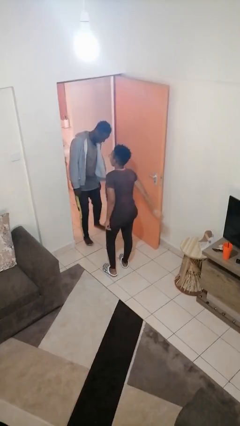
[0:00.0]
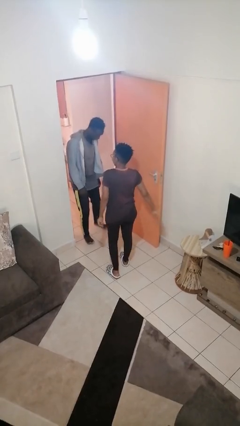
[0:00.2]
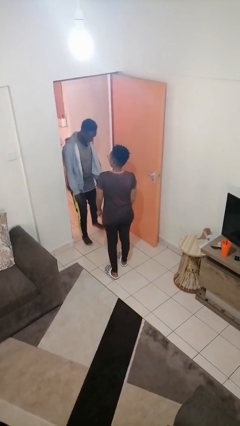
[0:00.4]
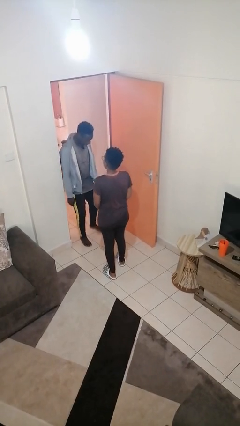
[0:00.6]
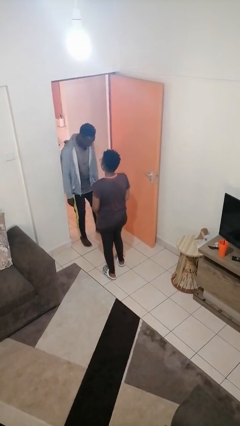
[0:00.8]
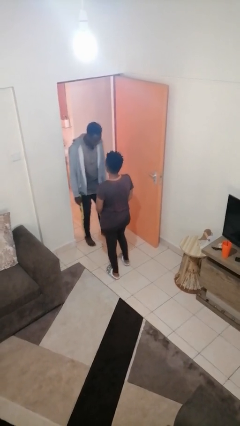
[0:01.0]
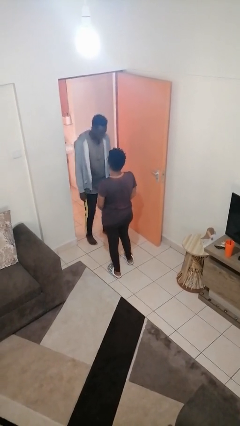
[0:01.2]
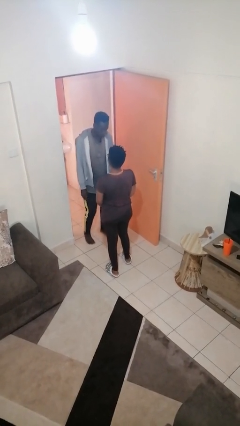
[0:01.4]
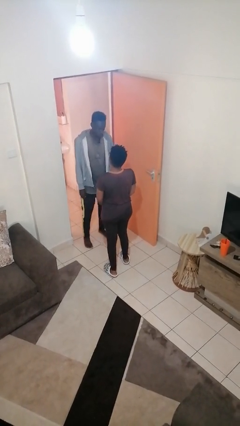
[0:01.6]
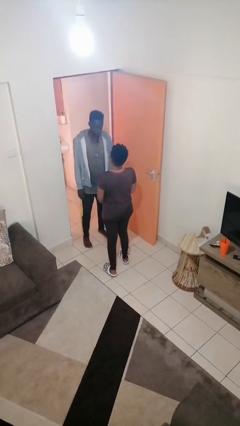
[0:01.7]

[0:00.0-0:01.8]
person shoves person

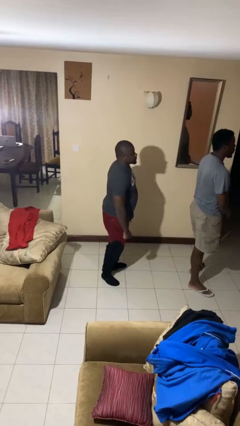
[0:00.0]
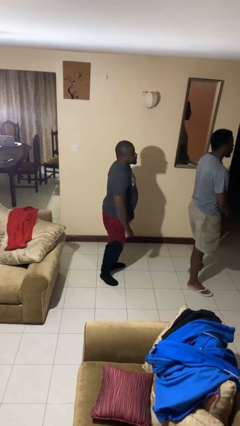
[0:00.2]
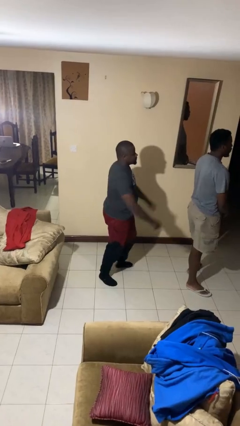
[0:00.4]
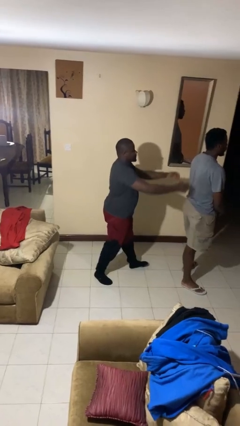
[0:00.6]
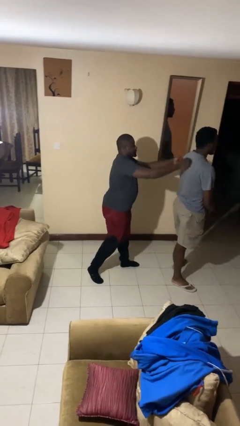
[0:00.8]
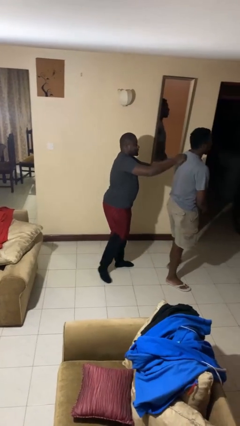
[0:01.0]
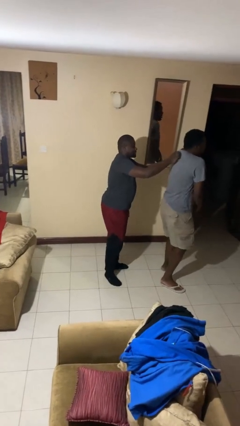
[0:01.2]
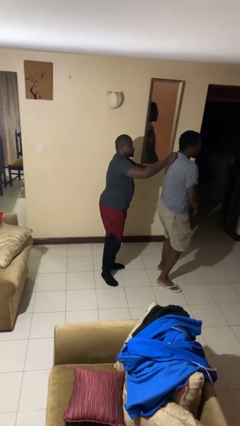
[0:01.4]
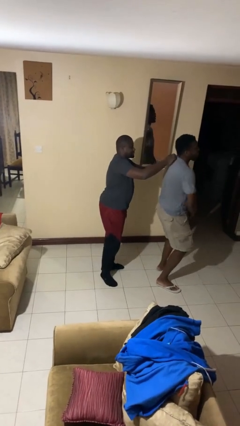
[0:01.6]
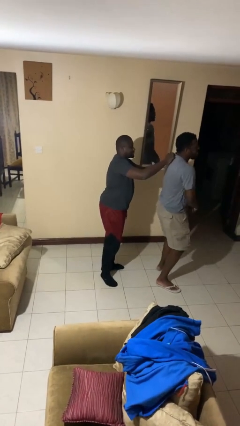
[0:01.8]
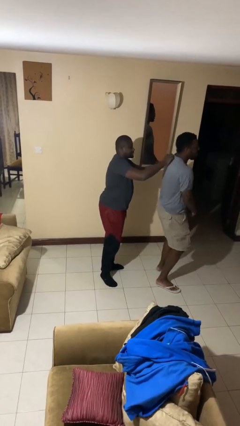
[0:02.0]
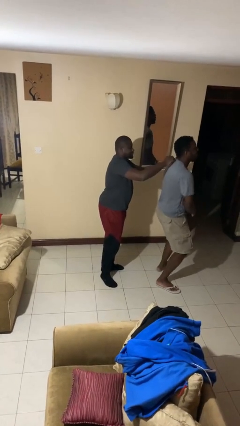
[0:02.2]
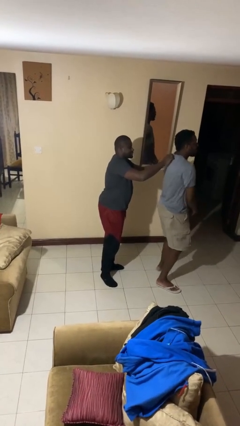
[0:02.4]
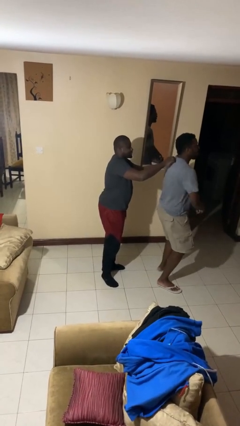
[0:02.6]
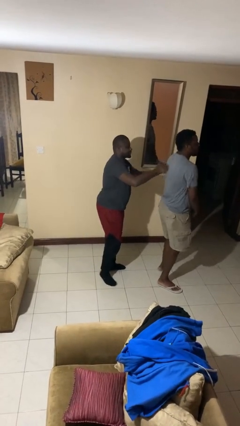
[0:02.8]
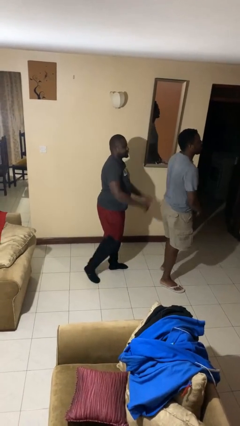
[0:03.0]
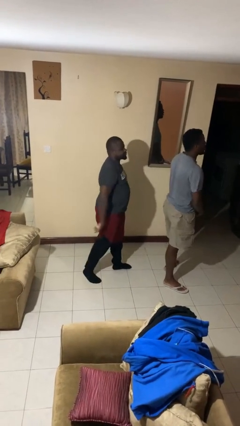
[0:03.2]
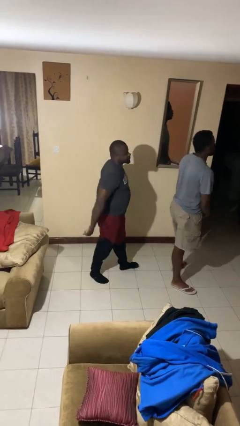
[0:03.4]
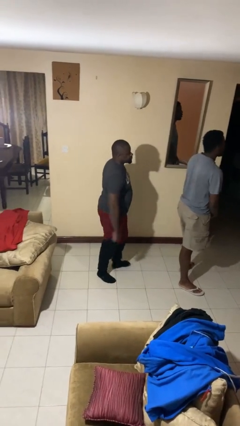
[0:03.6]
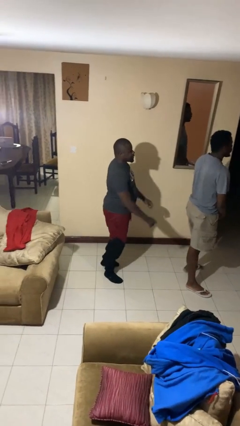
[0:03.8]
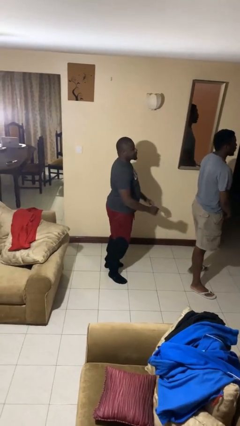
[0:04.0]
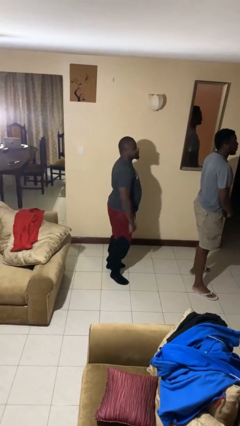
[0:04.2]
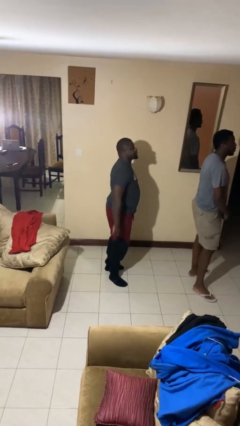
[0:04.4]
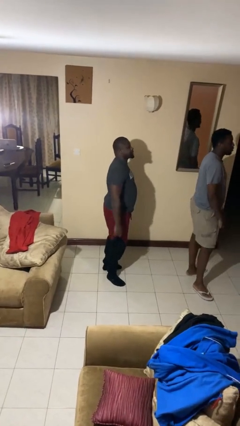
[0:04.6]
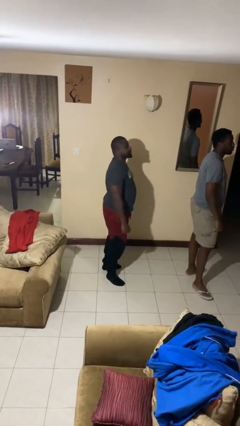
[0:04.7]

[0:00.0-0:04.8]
person tickles person

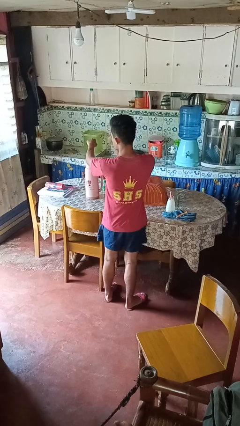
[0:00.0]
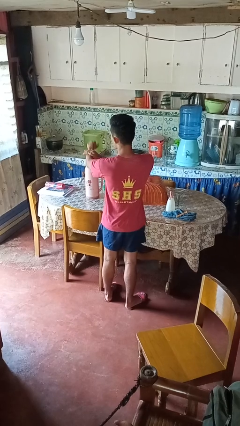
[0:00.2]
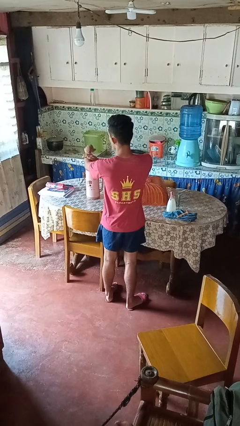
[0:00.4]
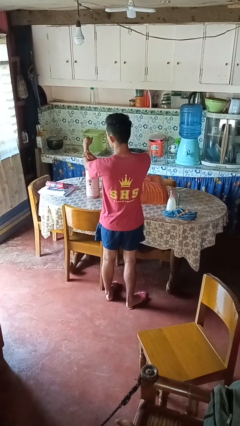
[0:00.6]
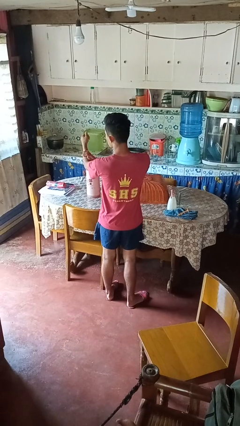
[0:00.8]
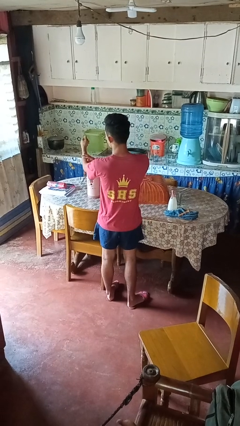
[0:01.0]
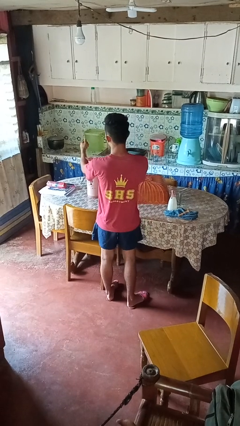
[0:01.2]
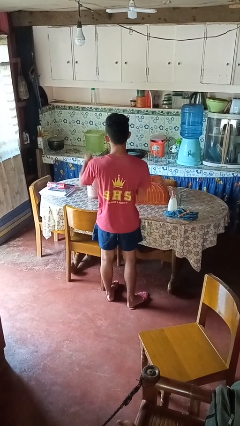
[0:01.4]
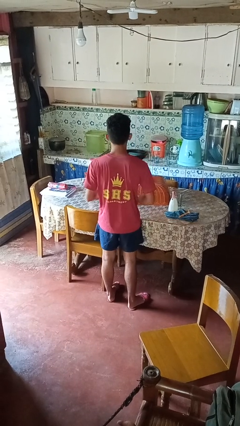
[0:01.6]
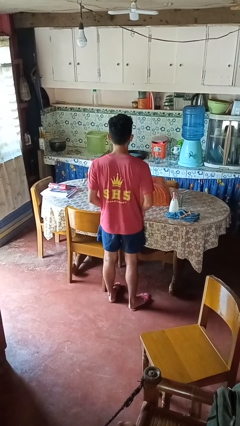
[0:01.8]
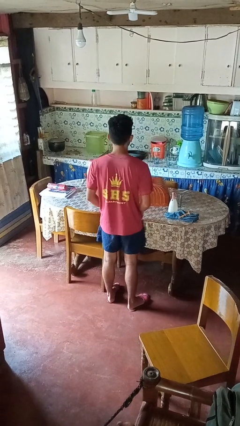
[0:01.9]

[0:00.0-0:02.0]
person swats bug

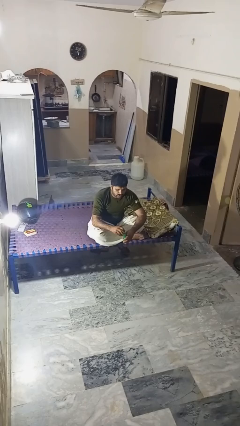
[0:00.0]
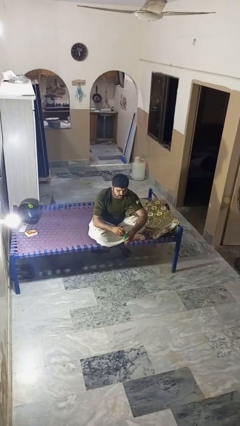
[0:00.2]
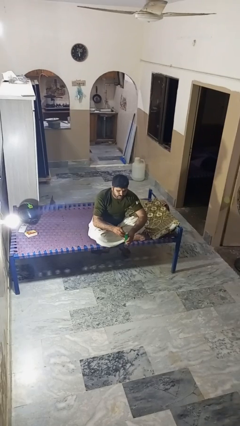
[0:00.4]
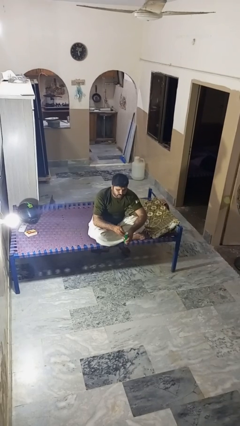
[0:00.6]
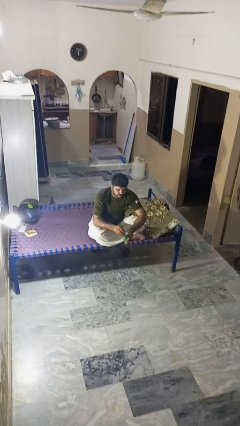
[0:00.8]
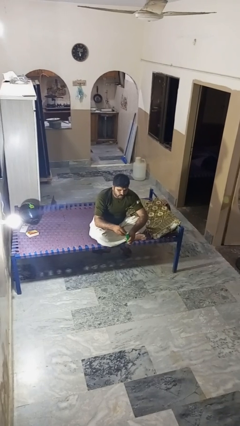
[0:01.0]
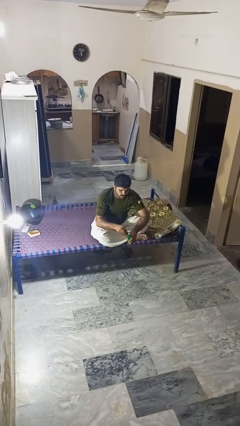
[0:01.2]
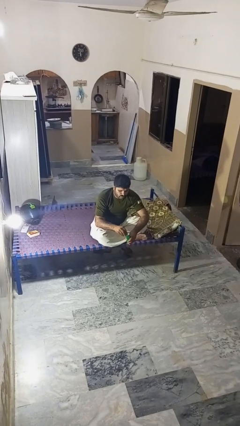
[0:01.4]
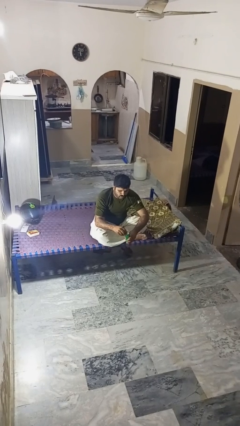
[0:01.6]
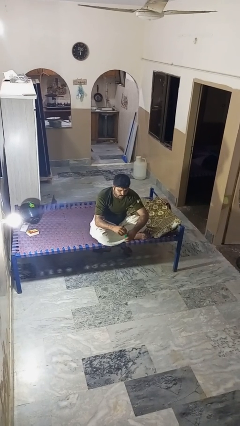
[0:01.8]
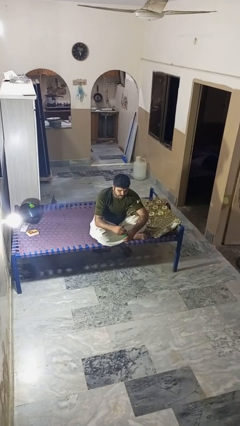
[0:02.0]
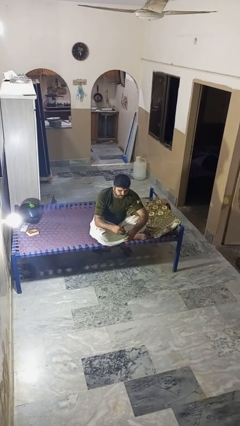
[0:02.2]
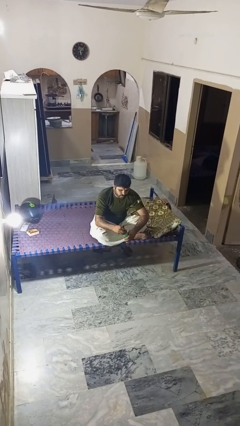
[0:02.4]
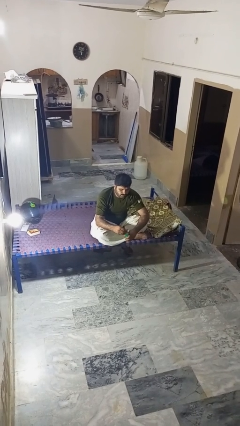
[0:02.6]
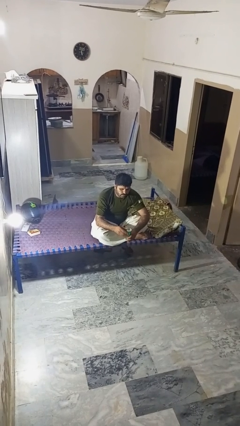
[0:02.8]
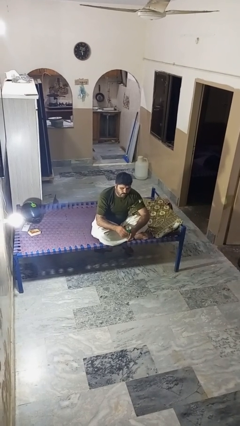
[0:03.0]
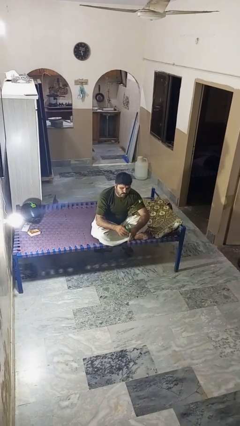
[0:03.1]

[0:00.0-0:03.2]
person opens beverage can

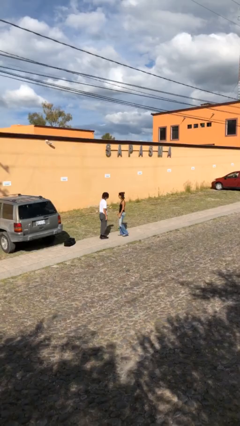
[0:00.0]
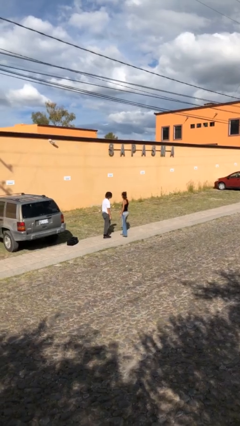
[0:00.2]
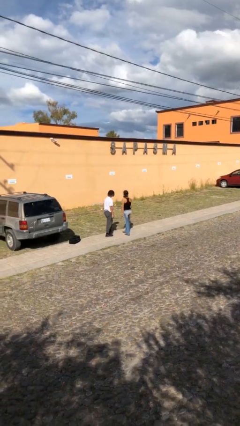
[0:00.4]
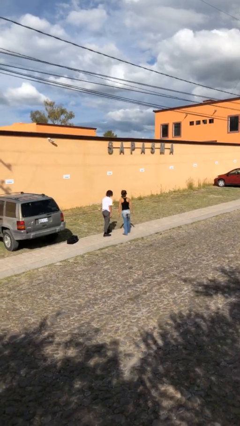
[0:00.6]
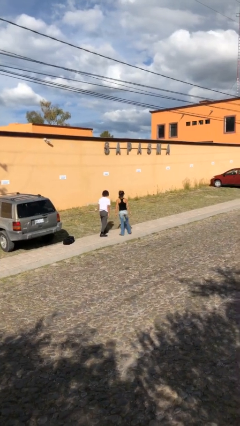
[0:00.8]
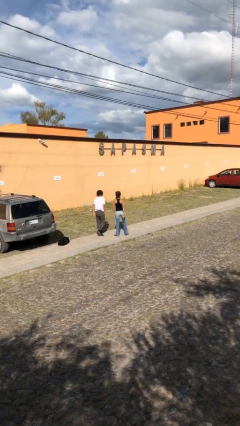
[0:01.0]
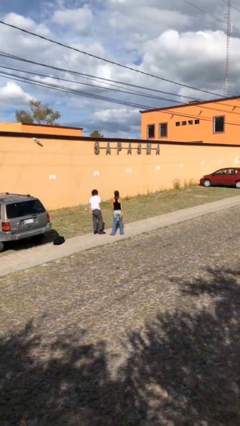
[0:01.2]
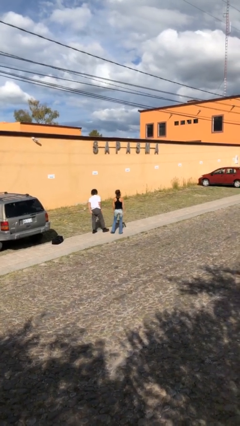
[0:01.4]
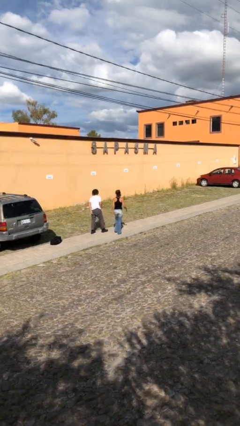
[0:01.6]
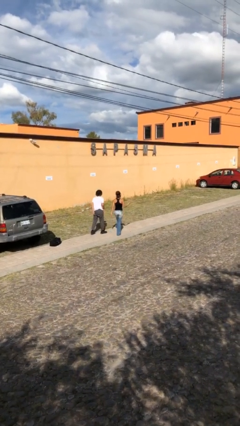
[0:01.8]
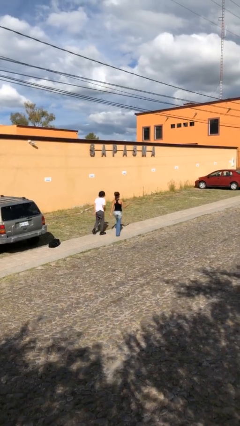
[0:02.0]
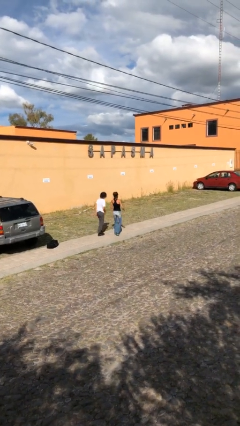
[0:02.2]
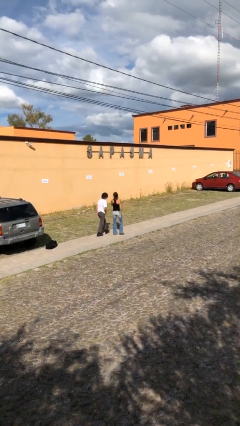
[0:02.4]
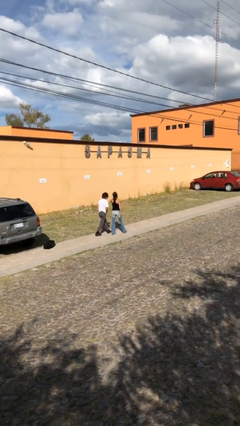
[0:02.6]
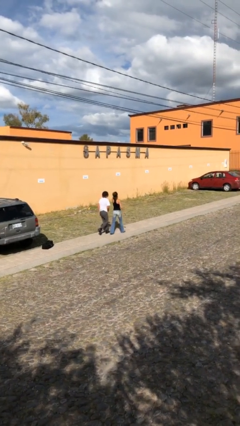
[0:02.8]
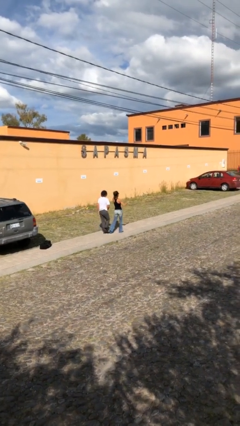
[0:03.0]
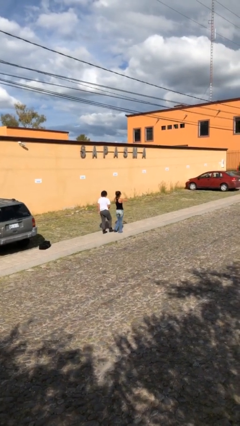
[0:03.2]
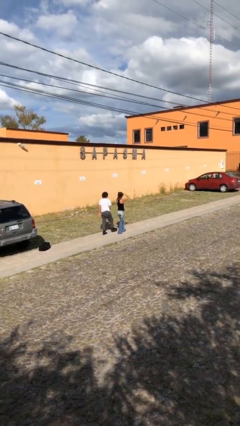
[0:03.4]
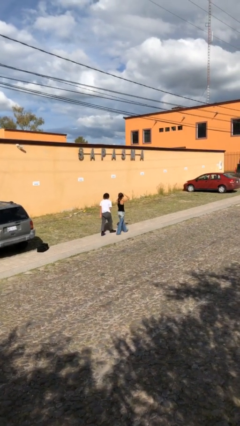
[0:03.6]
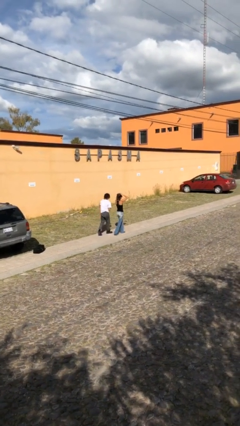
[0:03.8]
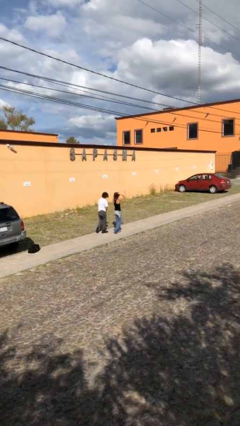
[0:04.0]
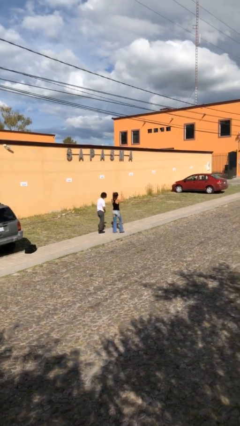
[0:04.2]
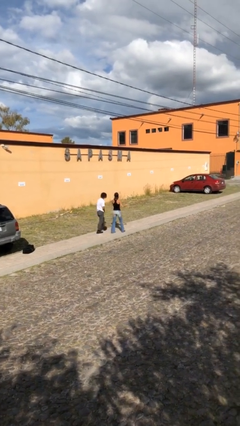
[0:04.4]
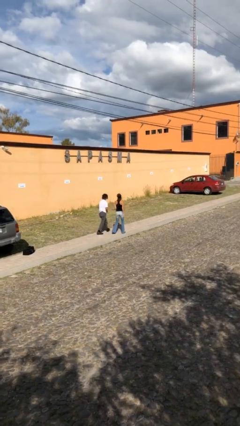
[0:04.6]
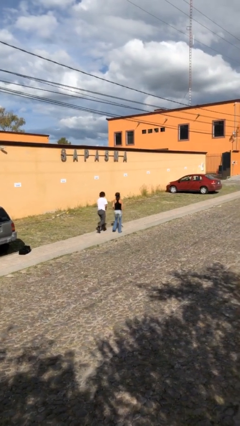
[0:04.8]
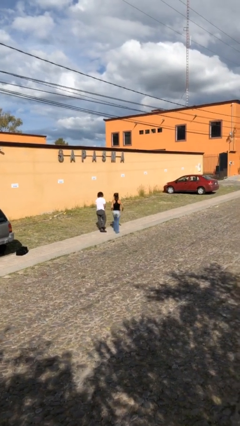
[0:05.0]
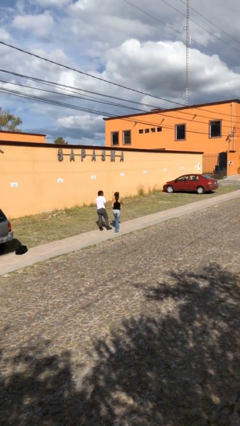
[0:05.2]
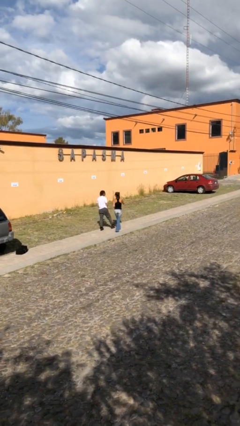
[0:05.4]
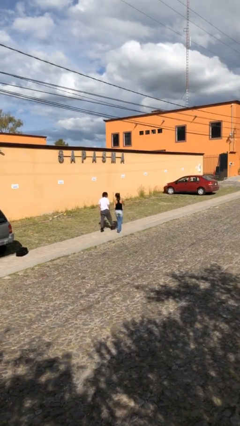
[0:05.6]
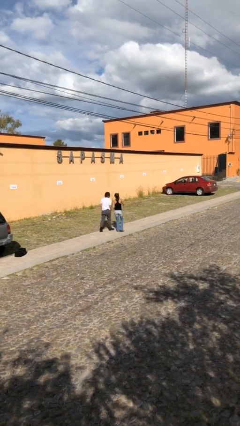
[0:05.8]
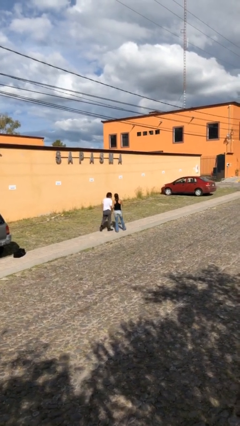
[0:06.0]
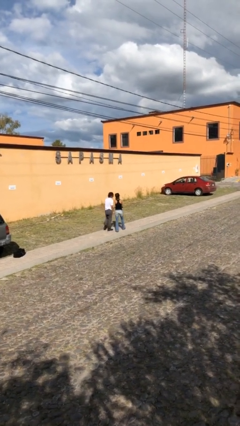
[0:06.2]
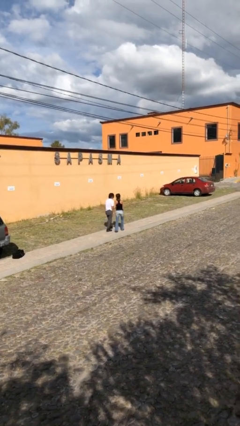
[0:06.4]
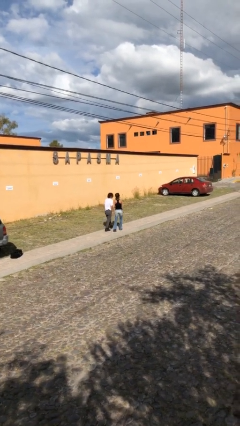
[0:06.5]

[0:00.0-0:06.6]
person talks to person
